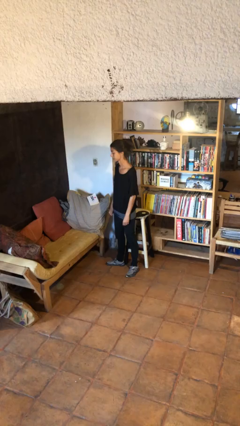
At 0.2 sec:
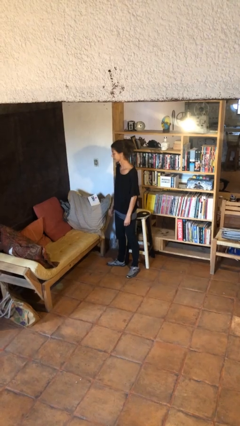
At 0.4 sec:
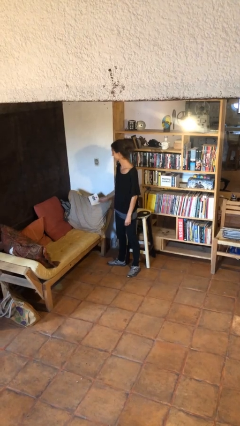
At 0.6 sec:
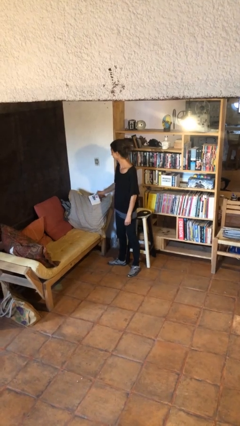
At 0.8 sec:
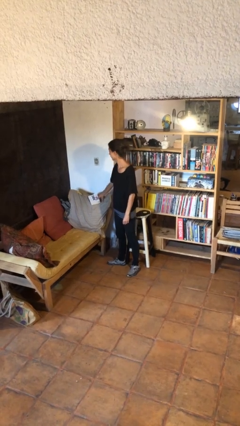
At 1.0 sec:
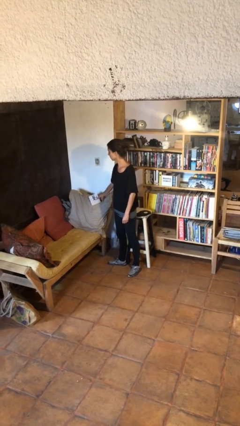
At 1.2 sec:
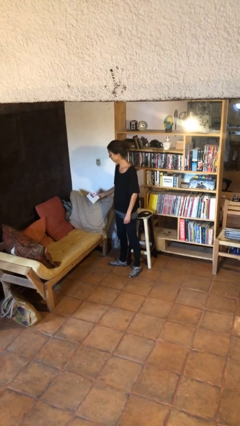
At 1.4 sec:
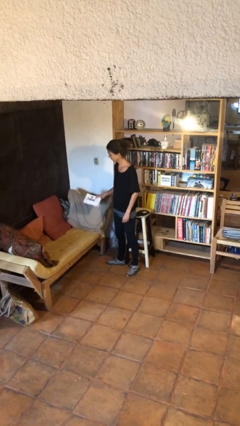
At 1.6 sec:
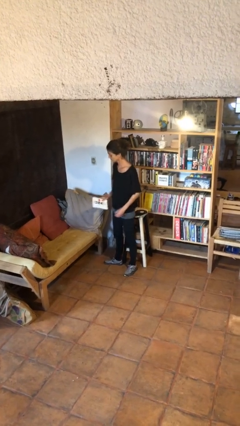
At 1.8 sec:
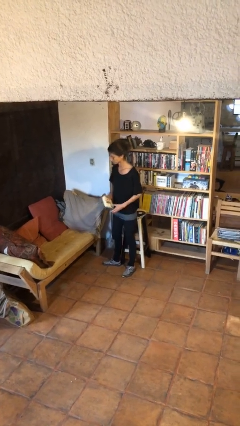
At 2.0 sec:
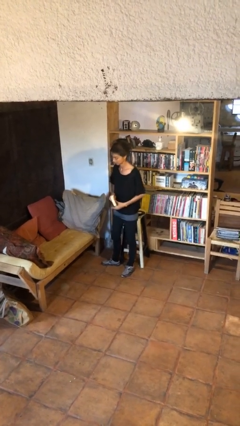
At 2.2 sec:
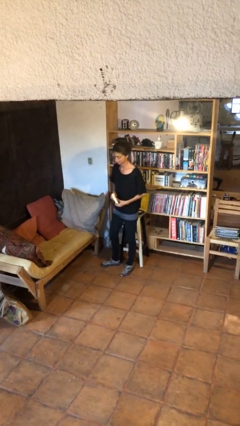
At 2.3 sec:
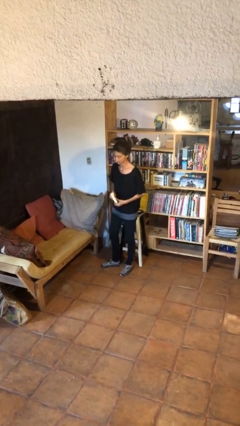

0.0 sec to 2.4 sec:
person picks up object from couch

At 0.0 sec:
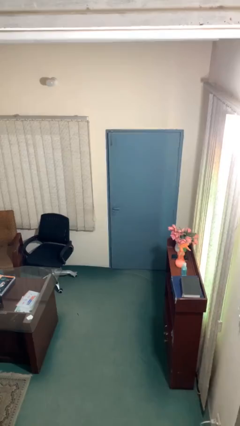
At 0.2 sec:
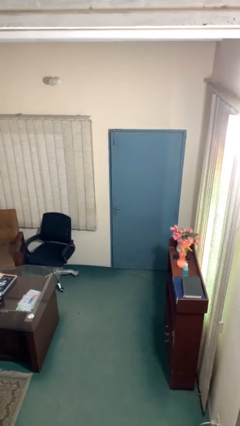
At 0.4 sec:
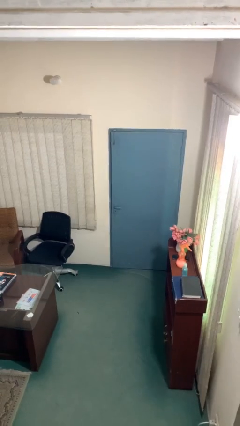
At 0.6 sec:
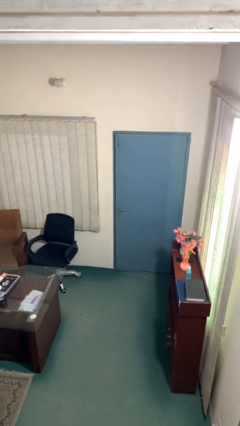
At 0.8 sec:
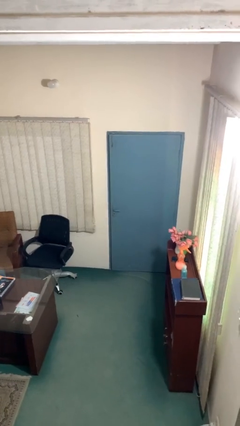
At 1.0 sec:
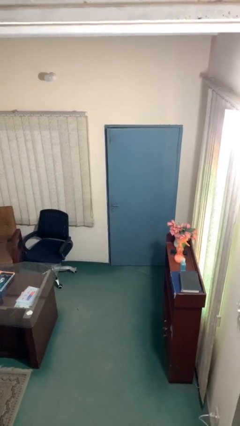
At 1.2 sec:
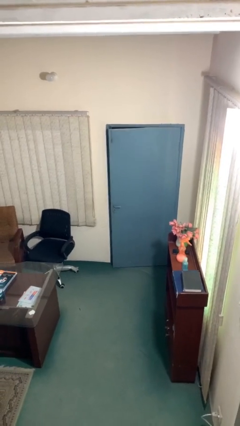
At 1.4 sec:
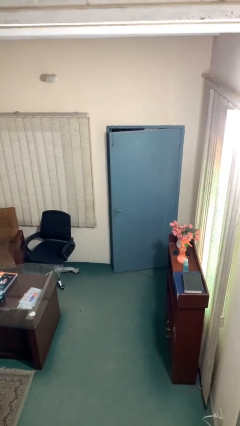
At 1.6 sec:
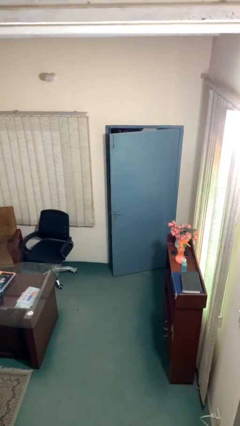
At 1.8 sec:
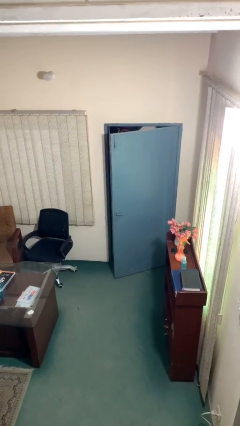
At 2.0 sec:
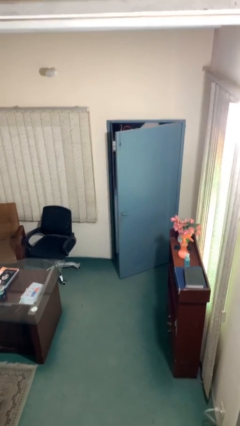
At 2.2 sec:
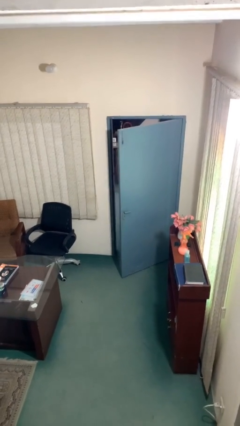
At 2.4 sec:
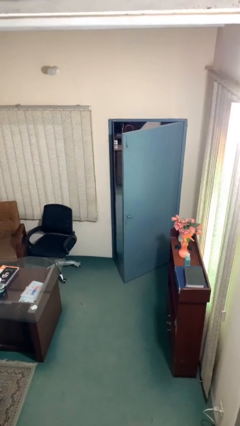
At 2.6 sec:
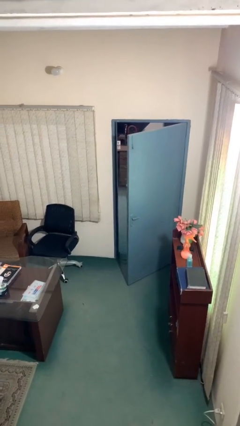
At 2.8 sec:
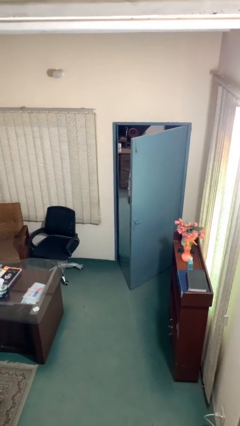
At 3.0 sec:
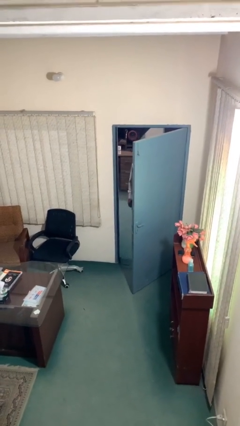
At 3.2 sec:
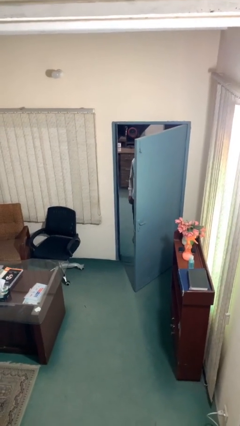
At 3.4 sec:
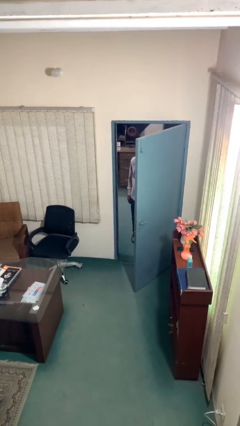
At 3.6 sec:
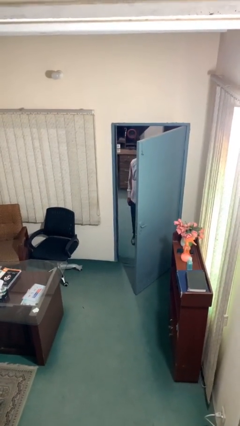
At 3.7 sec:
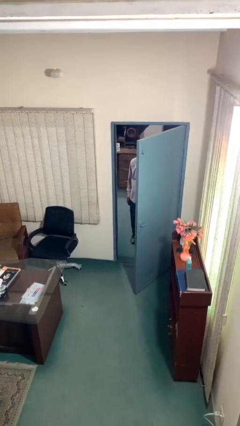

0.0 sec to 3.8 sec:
person opens facility door

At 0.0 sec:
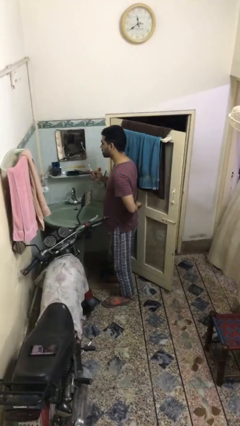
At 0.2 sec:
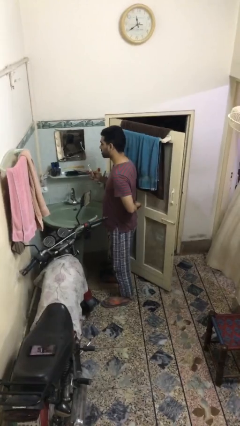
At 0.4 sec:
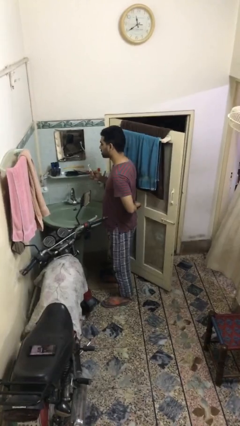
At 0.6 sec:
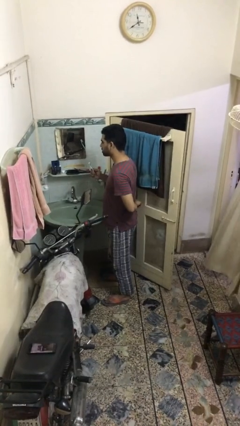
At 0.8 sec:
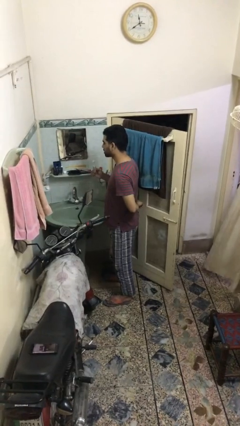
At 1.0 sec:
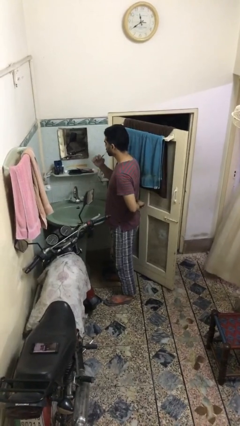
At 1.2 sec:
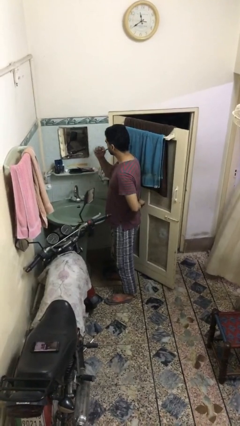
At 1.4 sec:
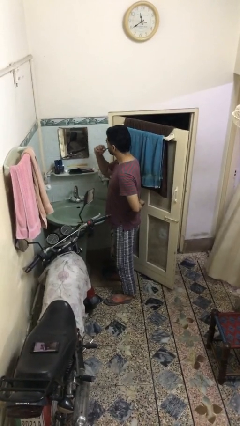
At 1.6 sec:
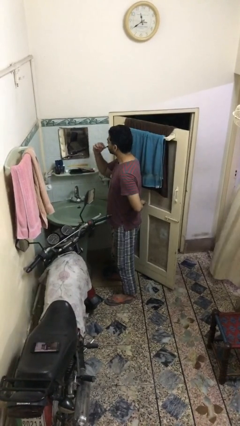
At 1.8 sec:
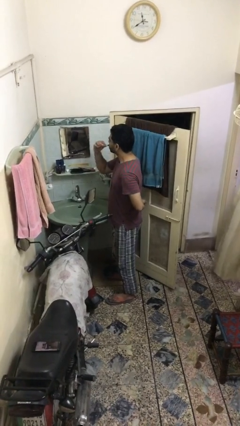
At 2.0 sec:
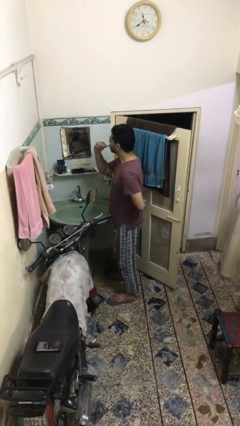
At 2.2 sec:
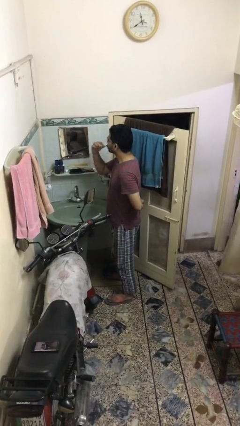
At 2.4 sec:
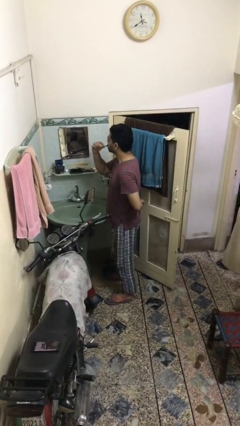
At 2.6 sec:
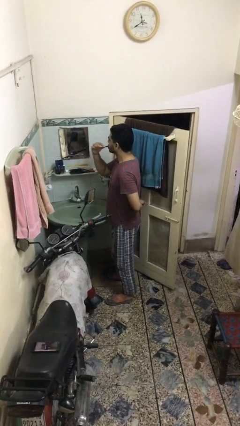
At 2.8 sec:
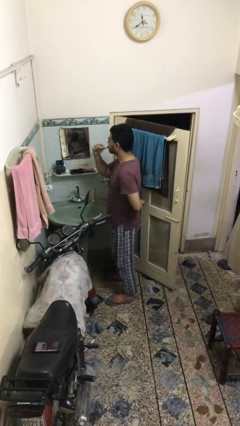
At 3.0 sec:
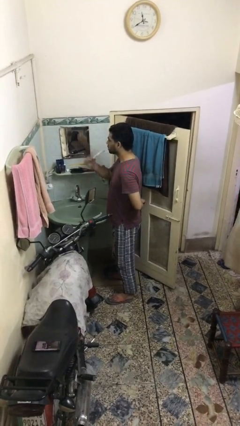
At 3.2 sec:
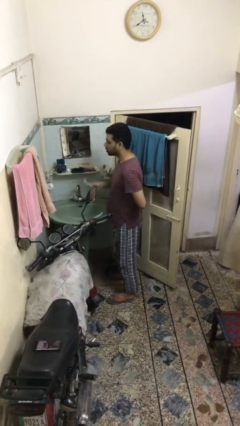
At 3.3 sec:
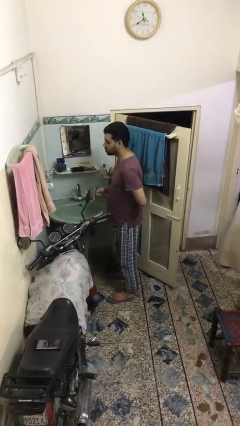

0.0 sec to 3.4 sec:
person brushes teeth

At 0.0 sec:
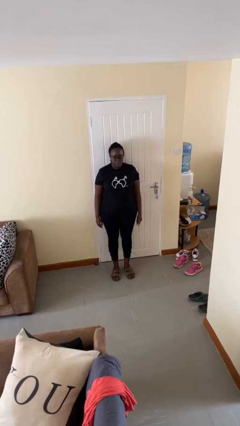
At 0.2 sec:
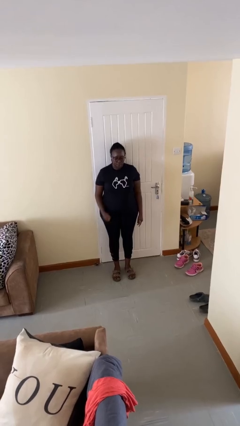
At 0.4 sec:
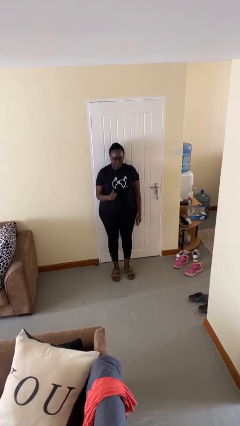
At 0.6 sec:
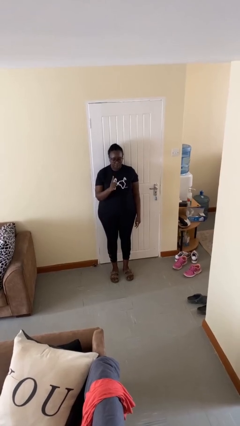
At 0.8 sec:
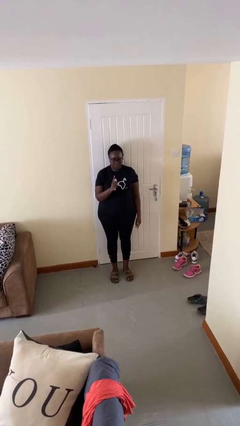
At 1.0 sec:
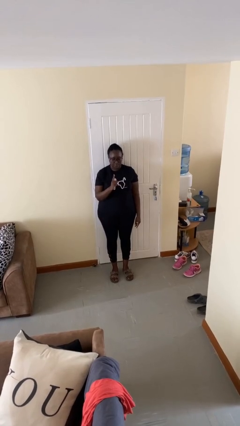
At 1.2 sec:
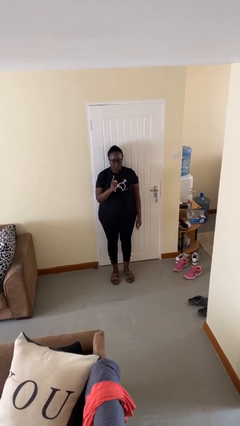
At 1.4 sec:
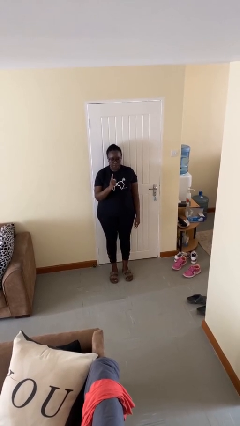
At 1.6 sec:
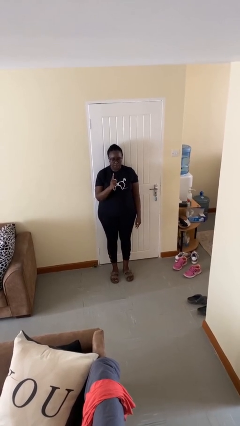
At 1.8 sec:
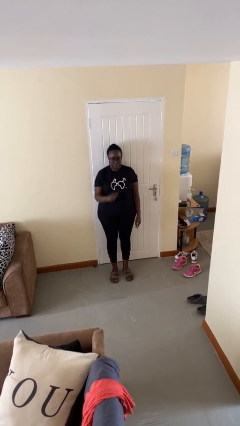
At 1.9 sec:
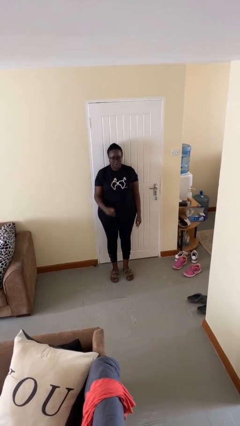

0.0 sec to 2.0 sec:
person gestures number one

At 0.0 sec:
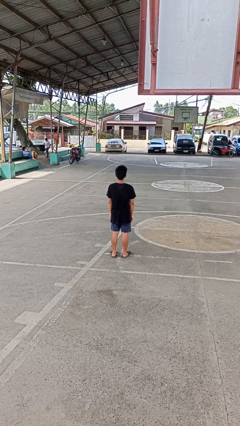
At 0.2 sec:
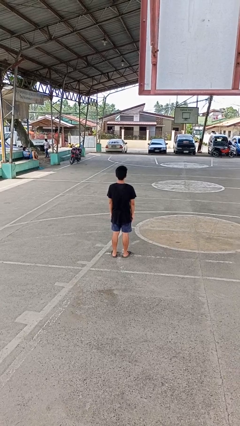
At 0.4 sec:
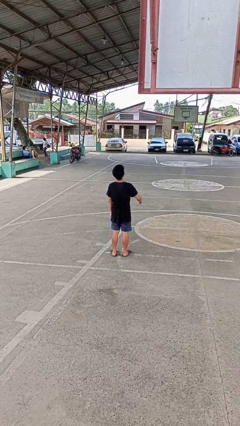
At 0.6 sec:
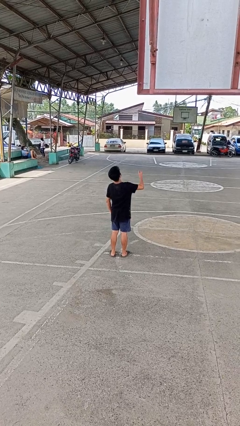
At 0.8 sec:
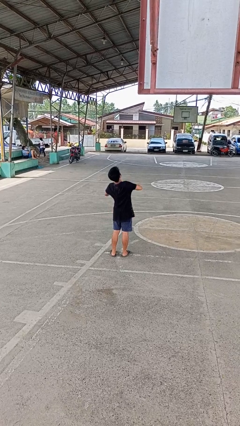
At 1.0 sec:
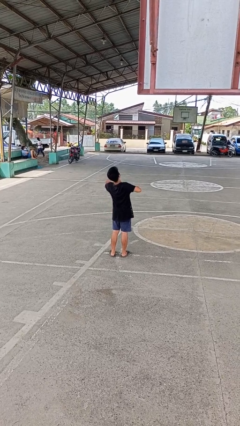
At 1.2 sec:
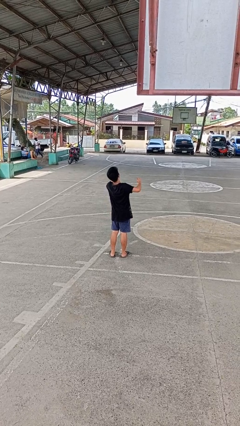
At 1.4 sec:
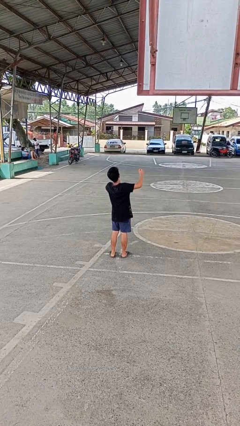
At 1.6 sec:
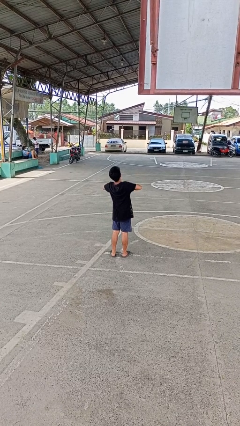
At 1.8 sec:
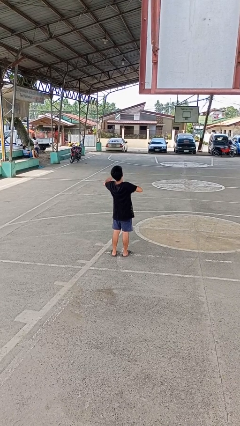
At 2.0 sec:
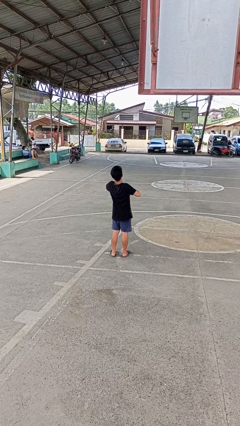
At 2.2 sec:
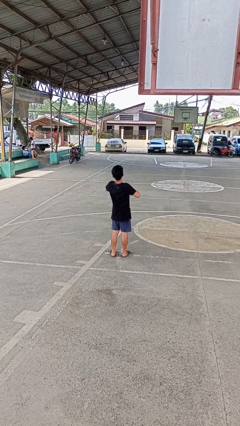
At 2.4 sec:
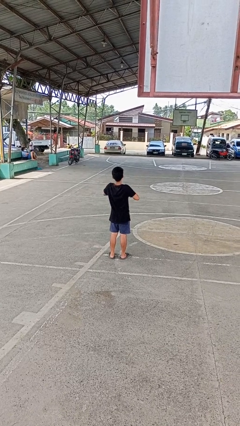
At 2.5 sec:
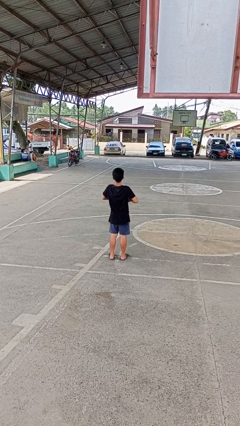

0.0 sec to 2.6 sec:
person drums on chest

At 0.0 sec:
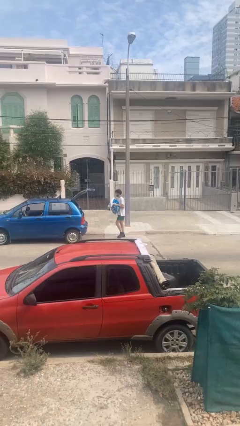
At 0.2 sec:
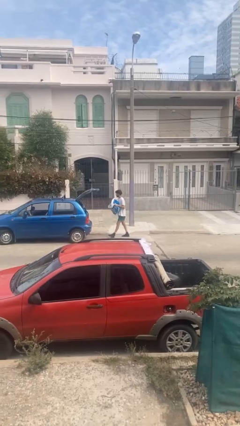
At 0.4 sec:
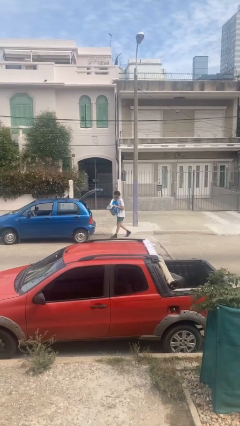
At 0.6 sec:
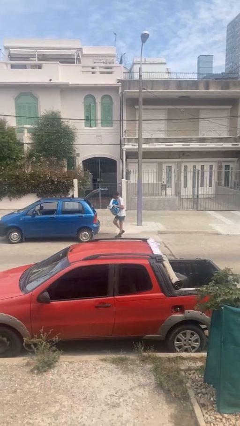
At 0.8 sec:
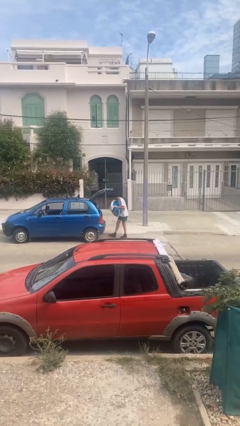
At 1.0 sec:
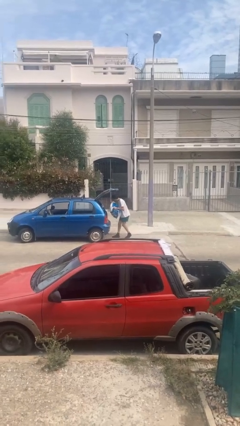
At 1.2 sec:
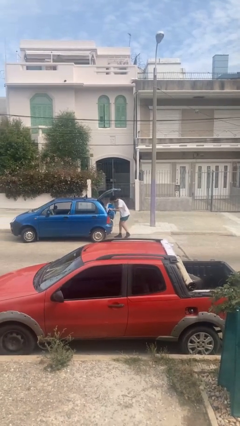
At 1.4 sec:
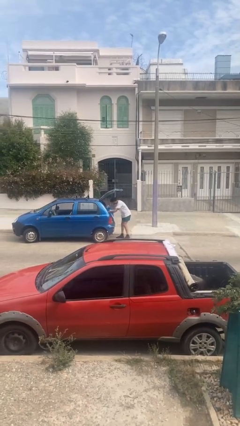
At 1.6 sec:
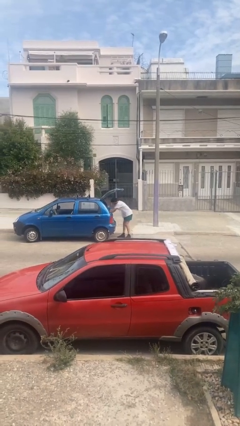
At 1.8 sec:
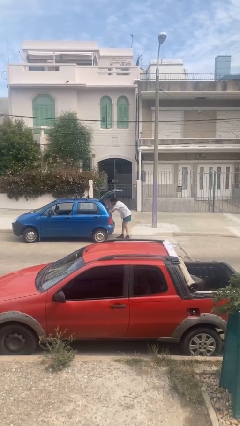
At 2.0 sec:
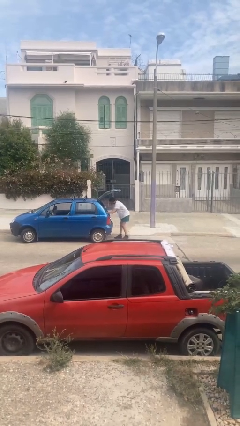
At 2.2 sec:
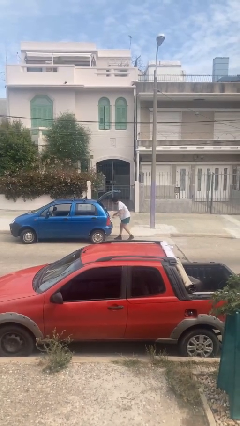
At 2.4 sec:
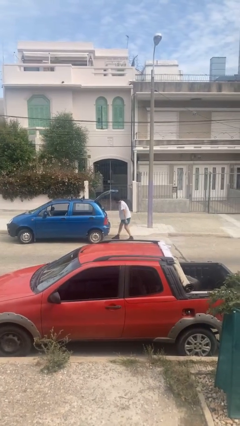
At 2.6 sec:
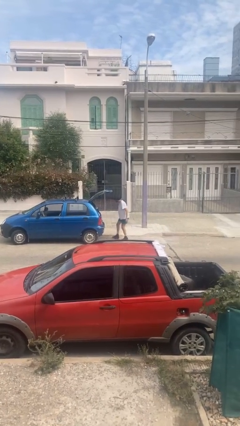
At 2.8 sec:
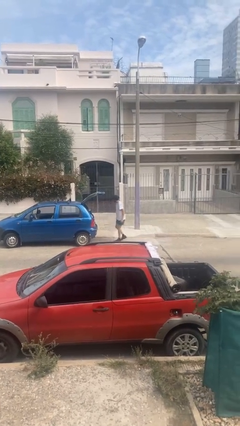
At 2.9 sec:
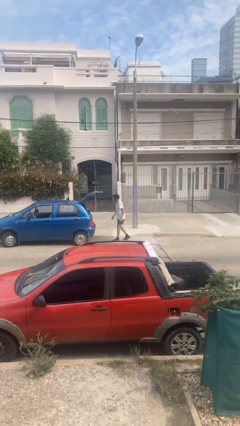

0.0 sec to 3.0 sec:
person loads car
